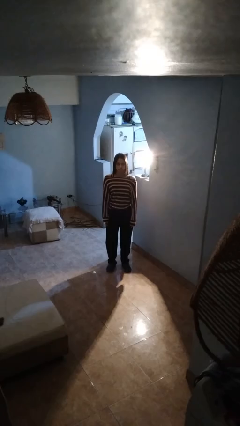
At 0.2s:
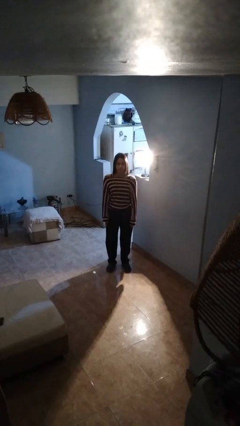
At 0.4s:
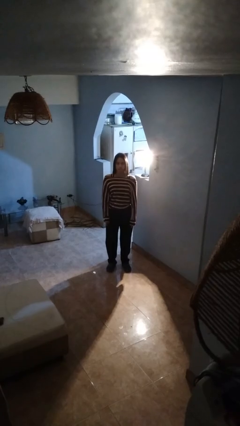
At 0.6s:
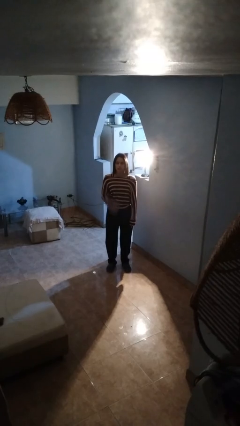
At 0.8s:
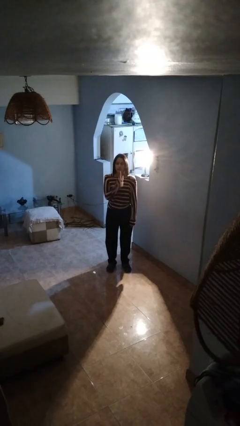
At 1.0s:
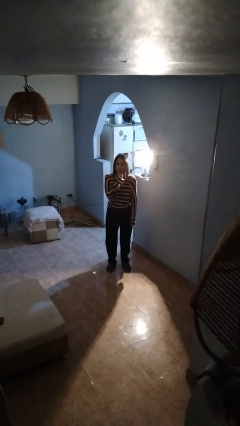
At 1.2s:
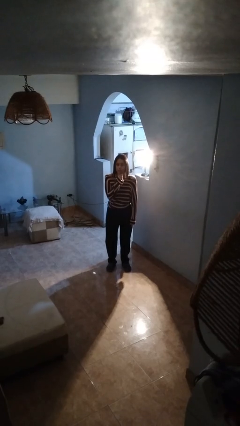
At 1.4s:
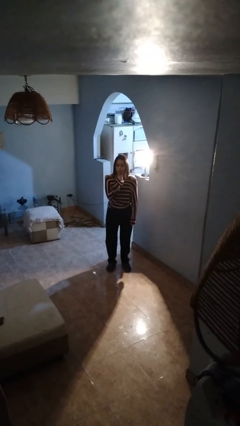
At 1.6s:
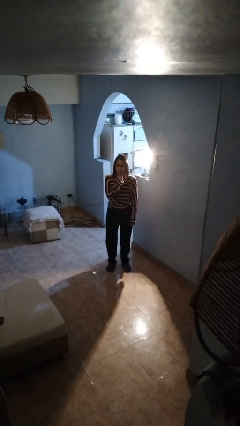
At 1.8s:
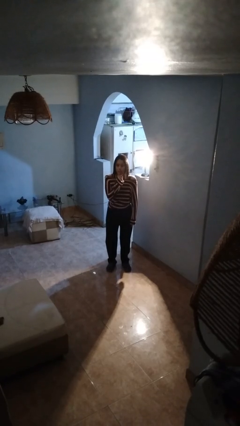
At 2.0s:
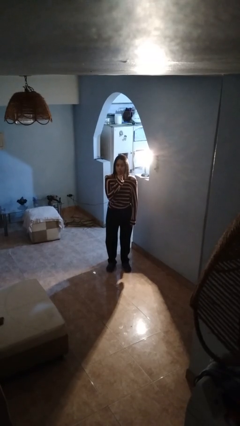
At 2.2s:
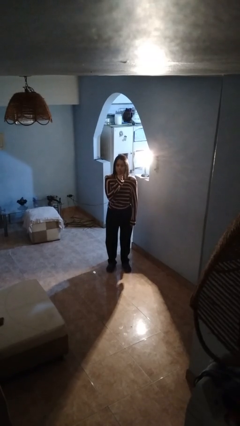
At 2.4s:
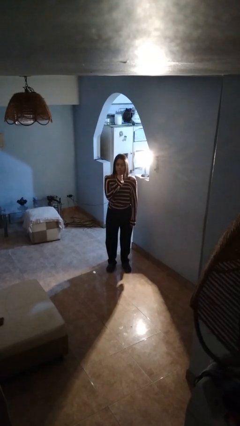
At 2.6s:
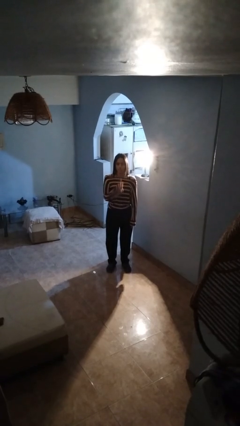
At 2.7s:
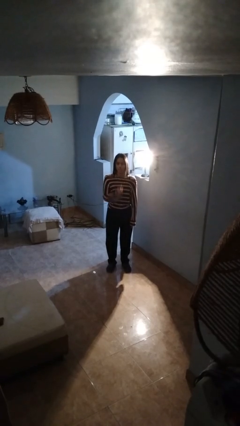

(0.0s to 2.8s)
person gestures be quiet

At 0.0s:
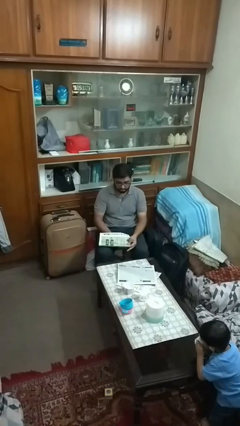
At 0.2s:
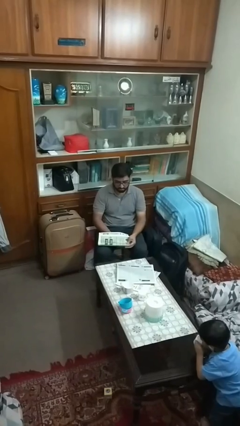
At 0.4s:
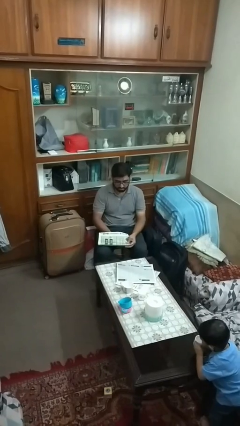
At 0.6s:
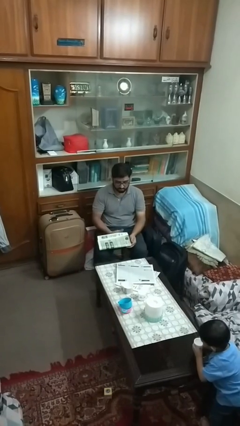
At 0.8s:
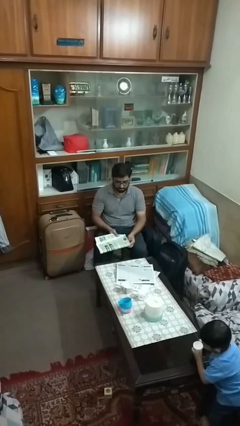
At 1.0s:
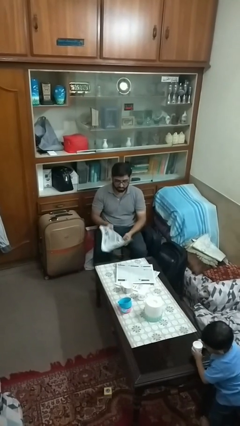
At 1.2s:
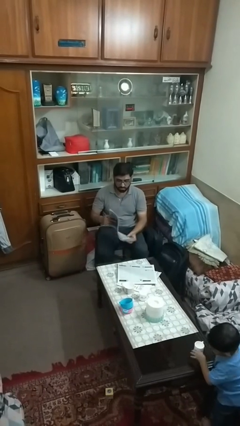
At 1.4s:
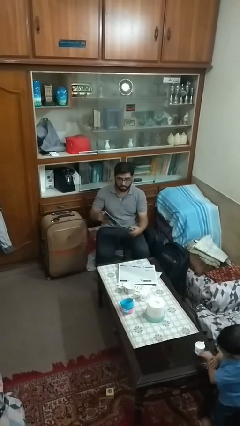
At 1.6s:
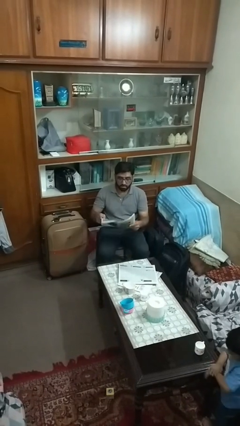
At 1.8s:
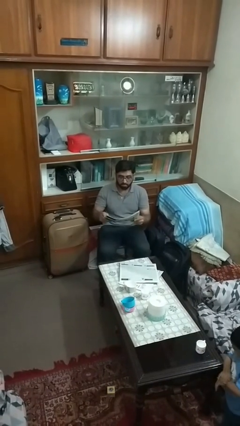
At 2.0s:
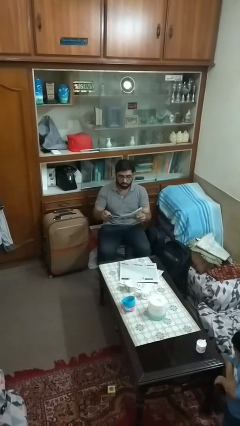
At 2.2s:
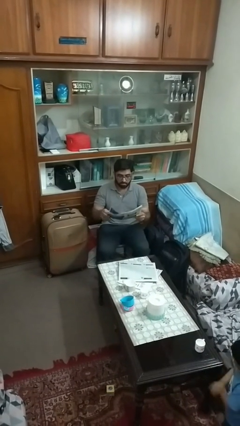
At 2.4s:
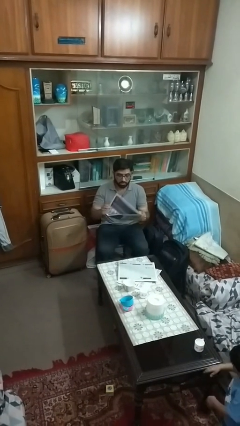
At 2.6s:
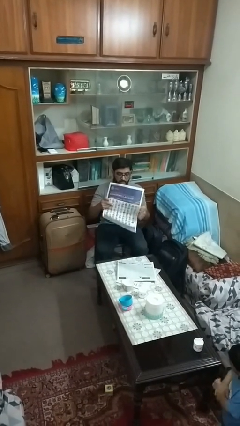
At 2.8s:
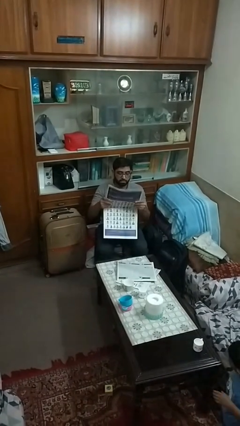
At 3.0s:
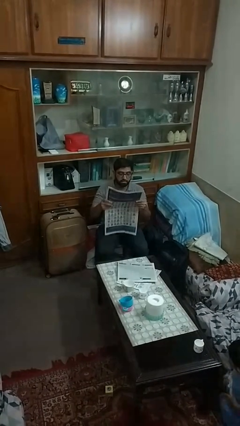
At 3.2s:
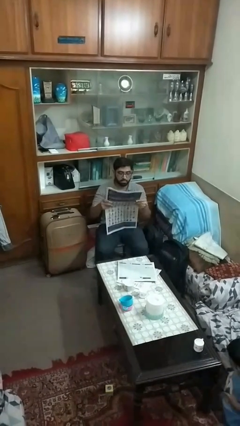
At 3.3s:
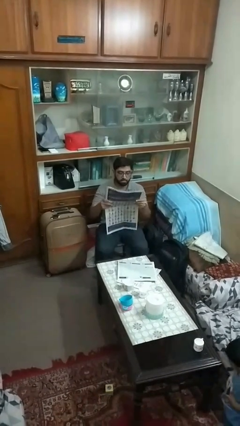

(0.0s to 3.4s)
person reads newspaper

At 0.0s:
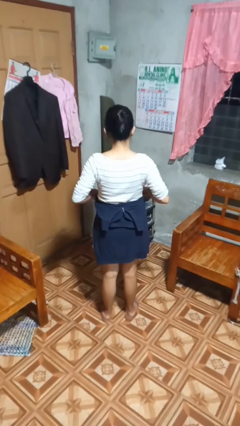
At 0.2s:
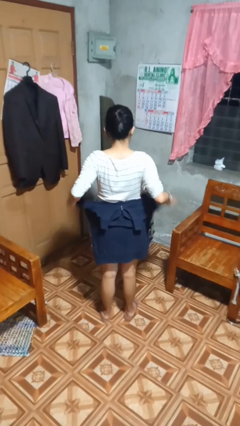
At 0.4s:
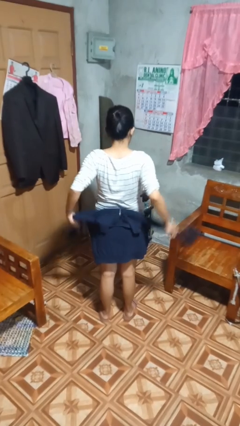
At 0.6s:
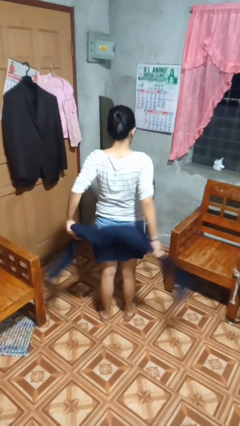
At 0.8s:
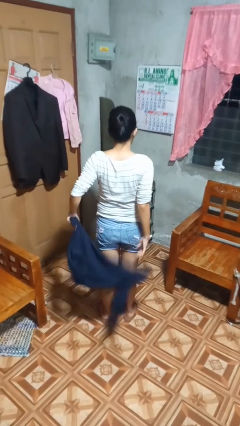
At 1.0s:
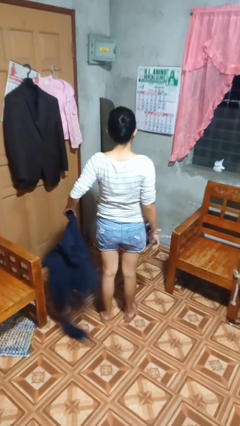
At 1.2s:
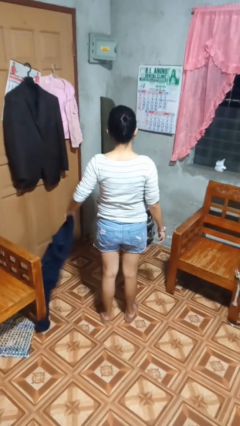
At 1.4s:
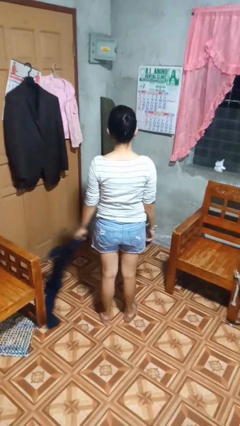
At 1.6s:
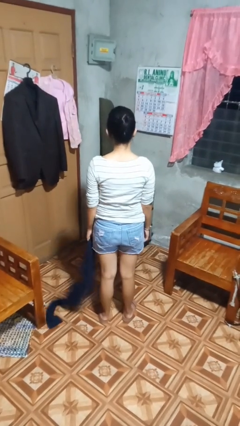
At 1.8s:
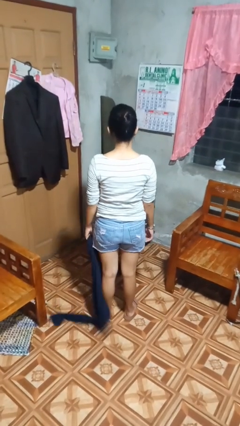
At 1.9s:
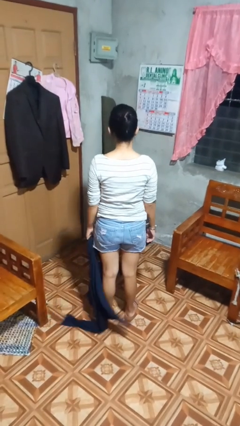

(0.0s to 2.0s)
person unties jacket around waist

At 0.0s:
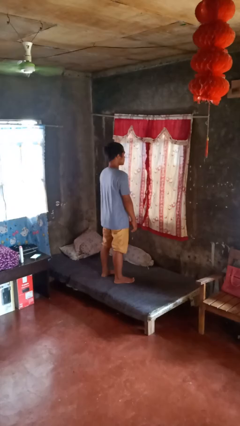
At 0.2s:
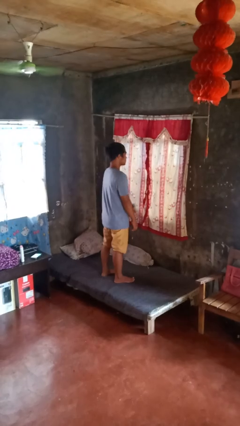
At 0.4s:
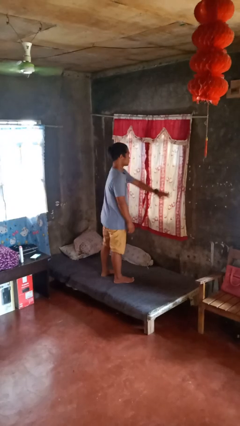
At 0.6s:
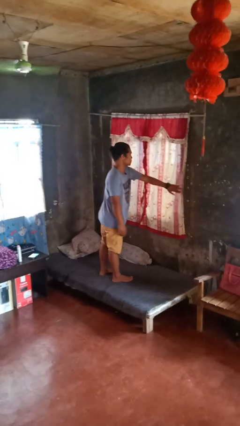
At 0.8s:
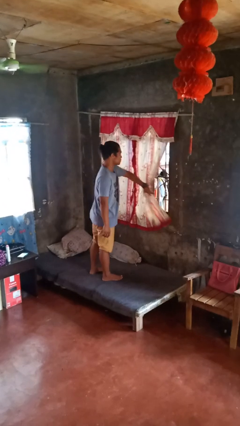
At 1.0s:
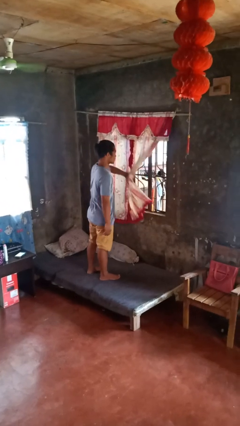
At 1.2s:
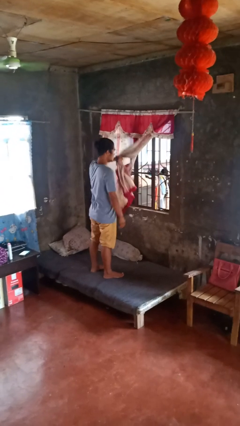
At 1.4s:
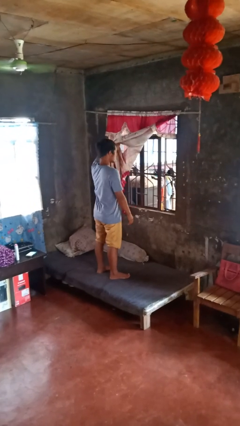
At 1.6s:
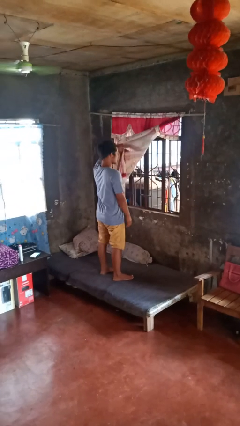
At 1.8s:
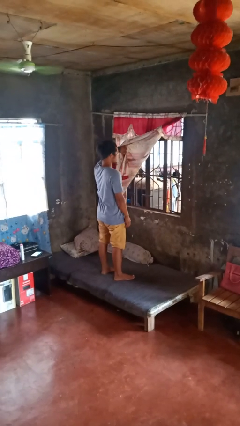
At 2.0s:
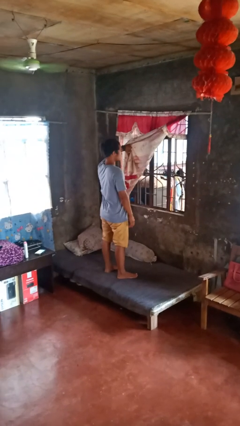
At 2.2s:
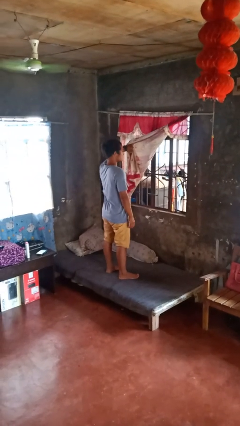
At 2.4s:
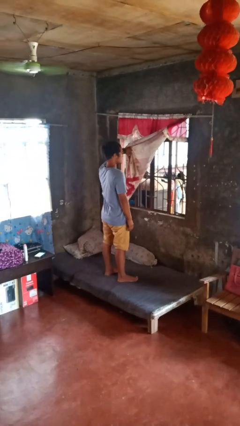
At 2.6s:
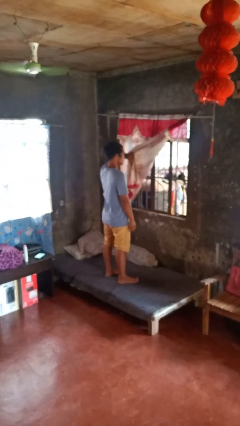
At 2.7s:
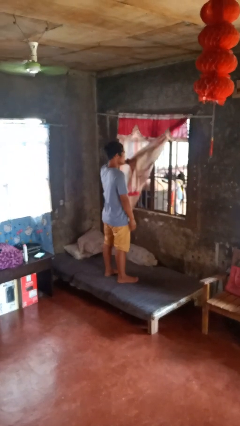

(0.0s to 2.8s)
person opens curtains

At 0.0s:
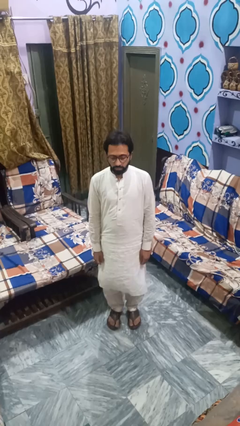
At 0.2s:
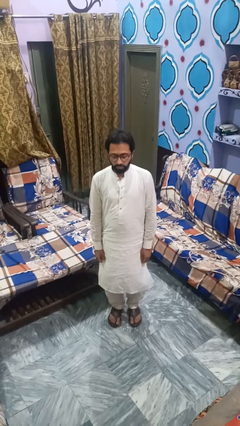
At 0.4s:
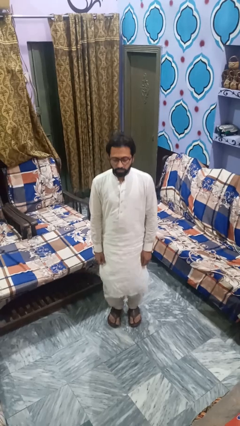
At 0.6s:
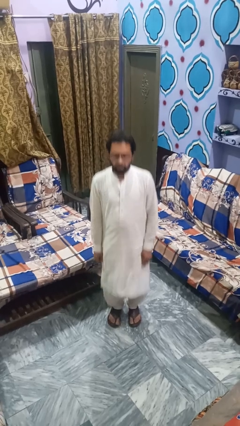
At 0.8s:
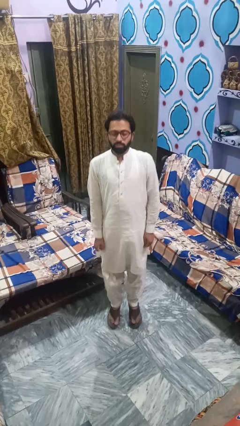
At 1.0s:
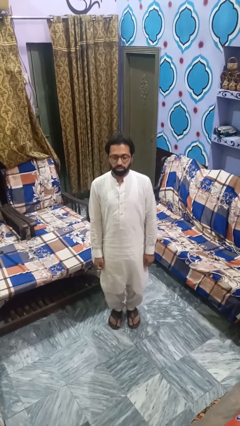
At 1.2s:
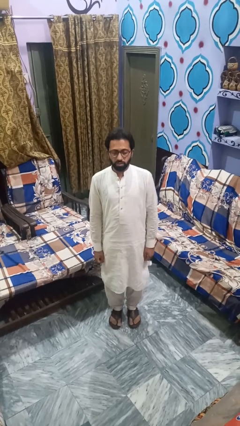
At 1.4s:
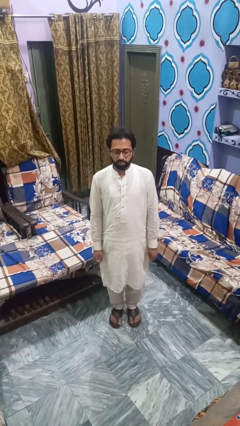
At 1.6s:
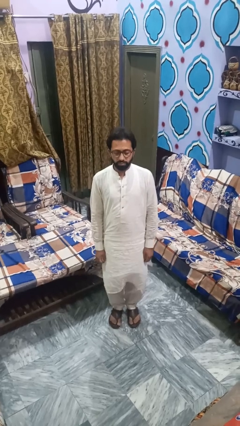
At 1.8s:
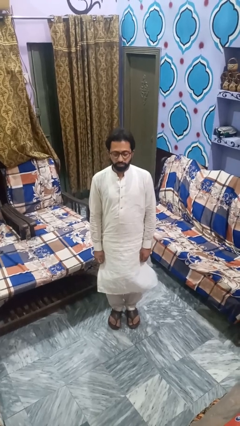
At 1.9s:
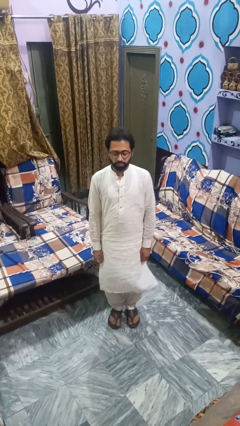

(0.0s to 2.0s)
person jumps

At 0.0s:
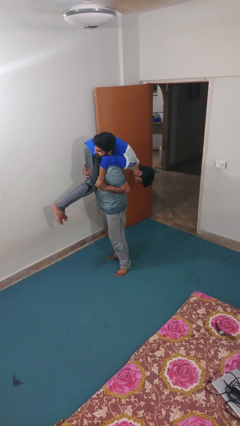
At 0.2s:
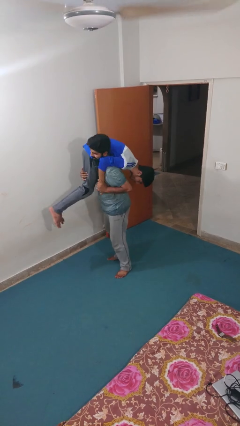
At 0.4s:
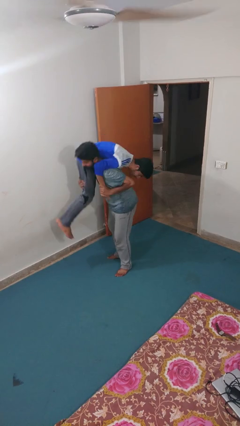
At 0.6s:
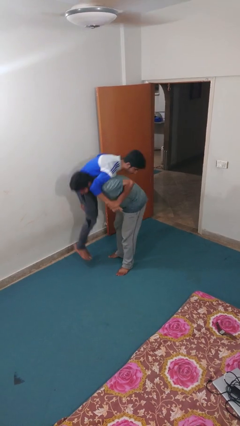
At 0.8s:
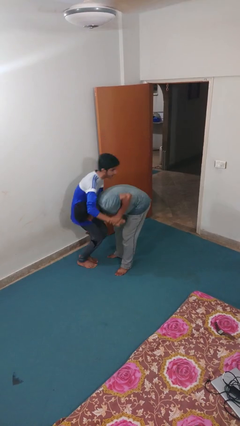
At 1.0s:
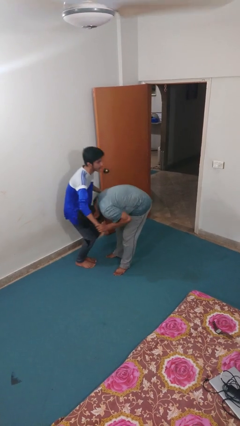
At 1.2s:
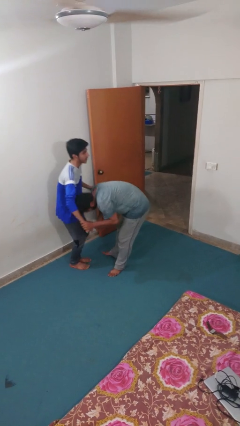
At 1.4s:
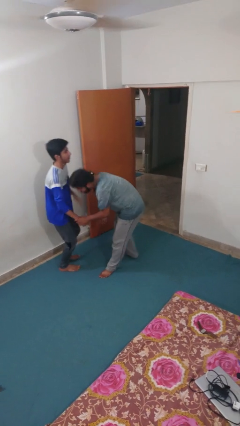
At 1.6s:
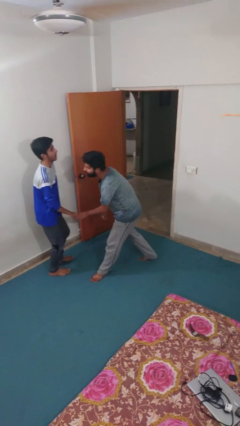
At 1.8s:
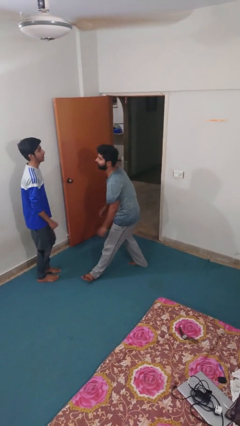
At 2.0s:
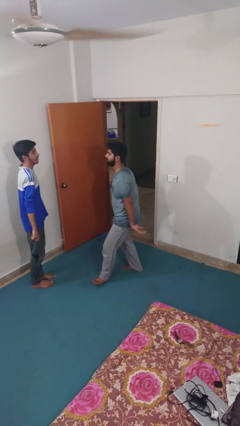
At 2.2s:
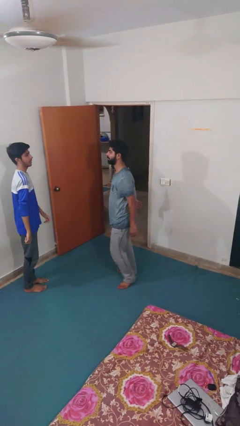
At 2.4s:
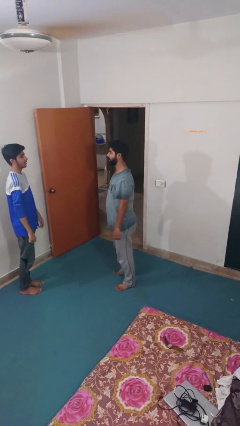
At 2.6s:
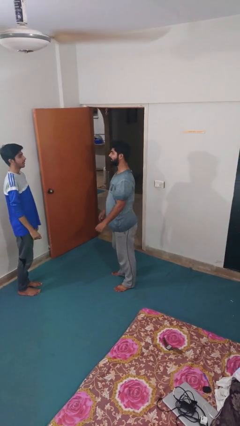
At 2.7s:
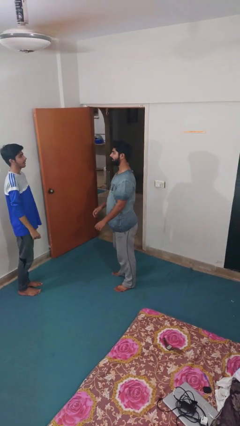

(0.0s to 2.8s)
person puts down person

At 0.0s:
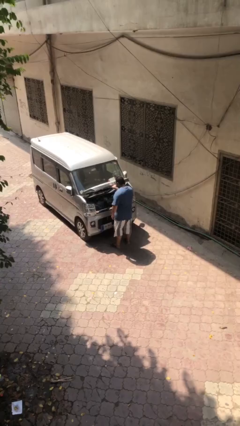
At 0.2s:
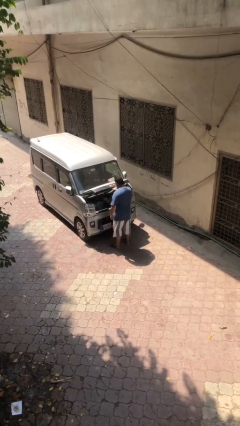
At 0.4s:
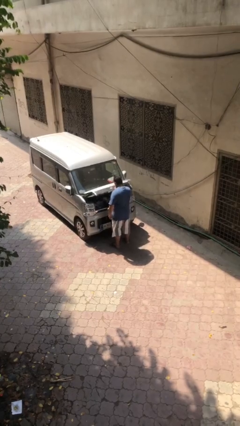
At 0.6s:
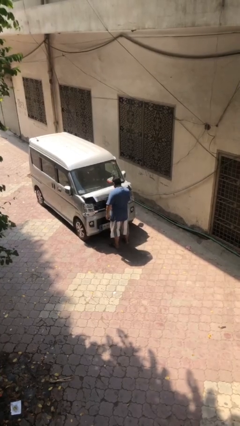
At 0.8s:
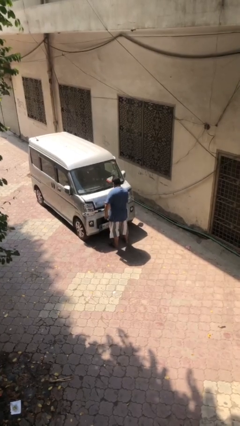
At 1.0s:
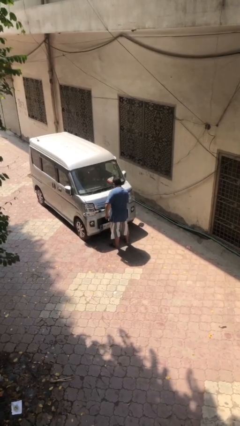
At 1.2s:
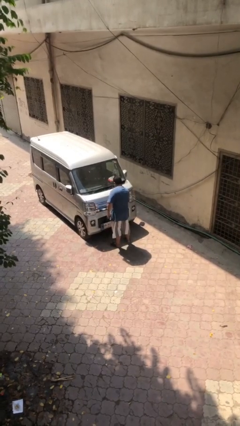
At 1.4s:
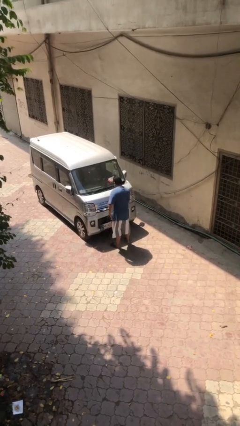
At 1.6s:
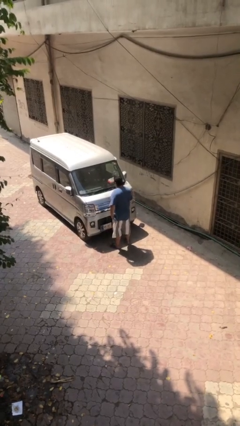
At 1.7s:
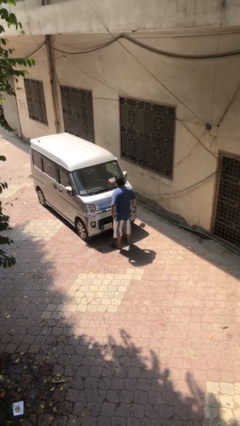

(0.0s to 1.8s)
person closes car hood
